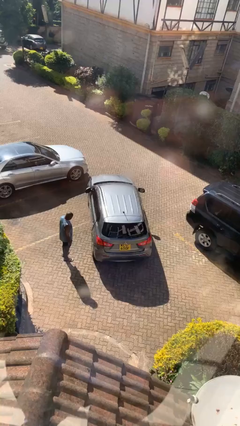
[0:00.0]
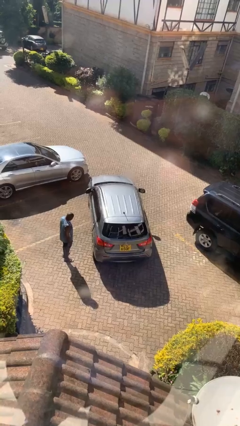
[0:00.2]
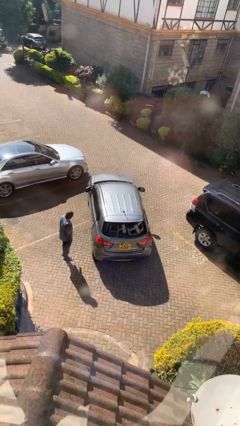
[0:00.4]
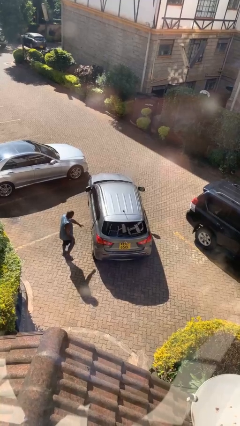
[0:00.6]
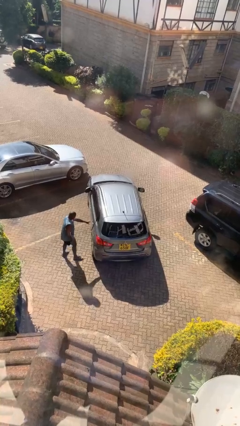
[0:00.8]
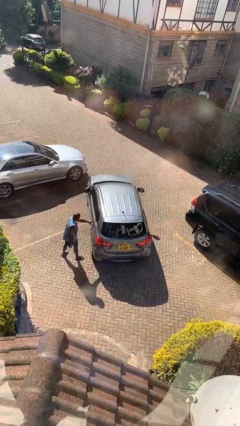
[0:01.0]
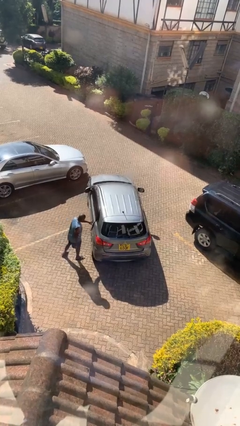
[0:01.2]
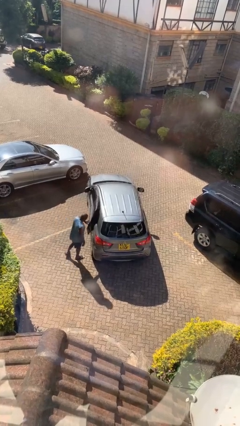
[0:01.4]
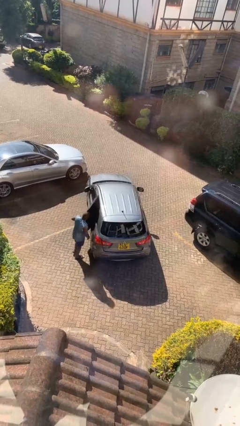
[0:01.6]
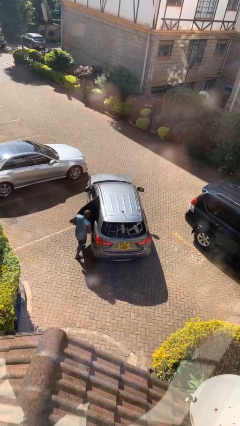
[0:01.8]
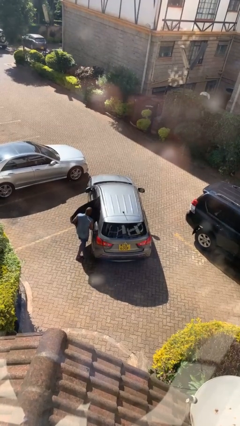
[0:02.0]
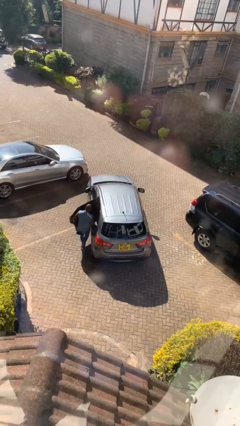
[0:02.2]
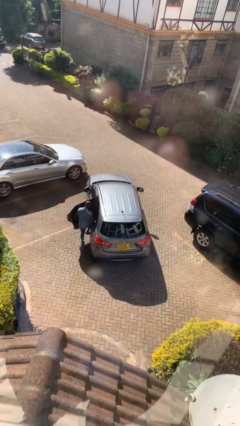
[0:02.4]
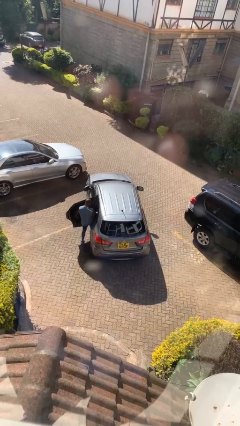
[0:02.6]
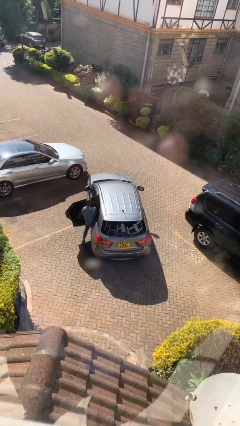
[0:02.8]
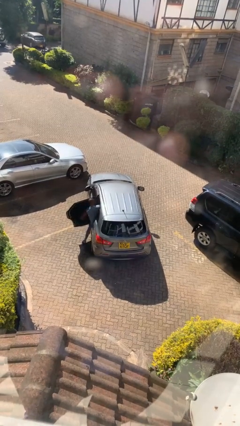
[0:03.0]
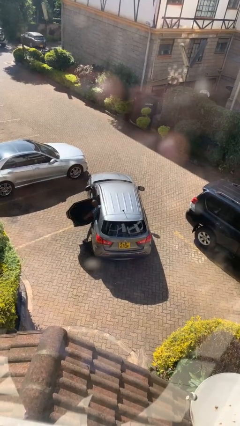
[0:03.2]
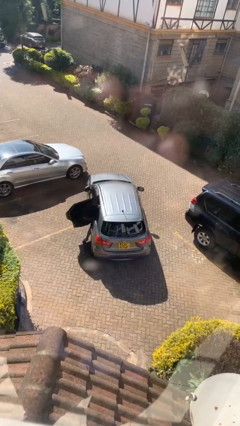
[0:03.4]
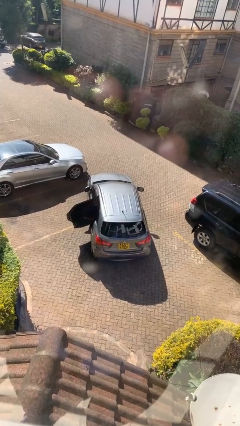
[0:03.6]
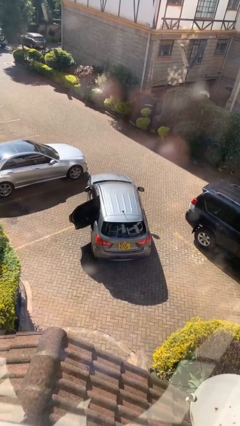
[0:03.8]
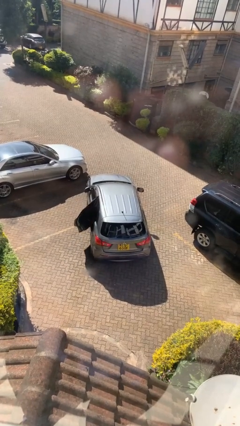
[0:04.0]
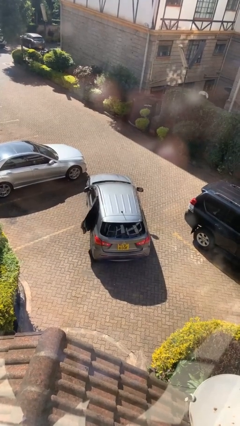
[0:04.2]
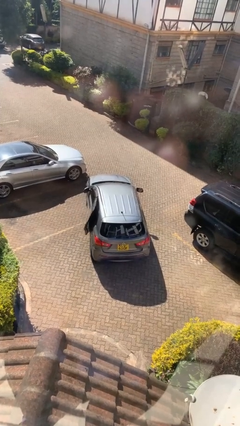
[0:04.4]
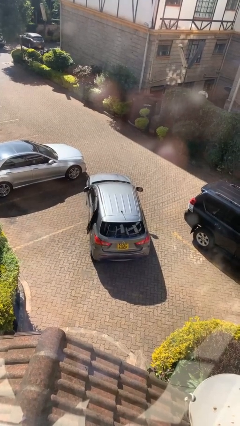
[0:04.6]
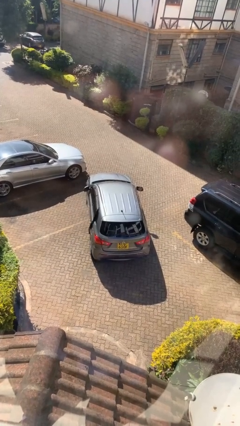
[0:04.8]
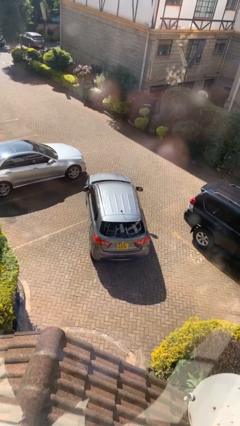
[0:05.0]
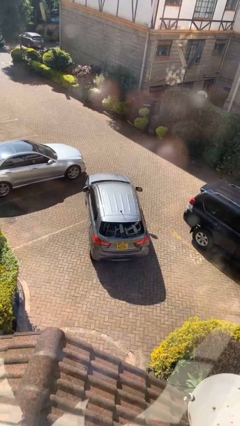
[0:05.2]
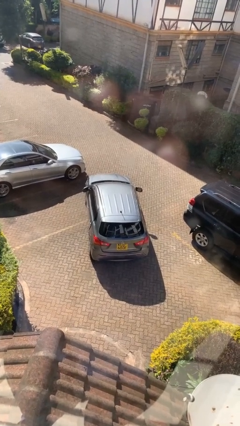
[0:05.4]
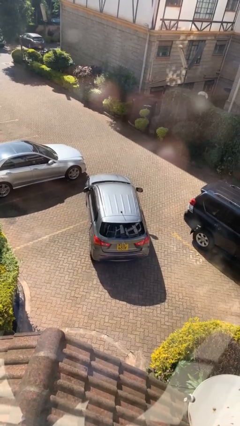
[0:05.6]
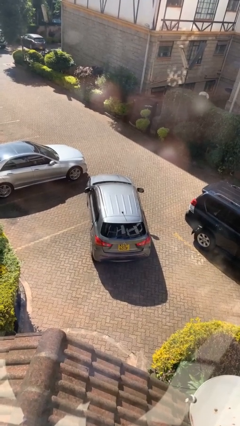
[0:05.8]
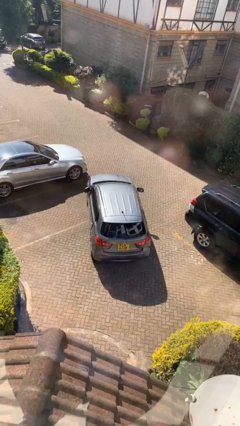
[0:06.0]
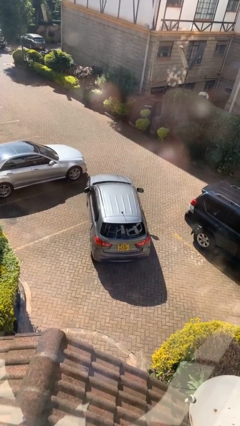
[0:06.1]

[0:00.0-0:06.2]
car picks up person

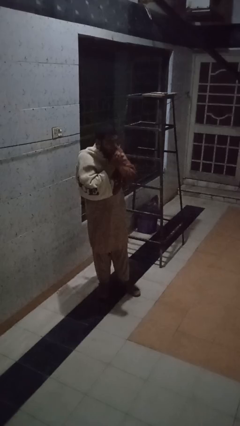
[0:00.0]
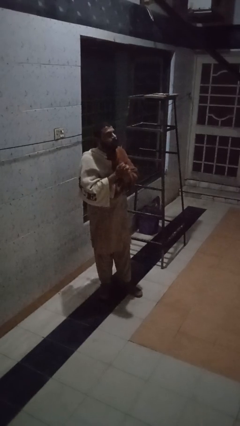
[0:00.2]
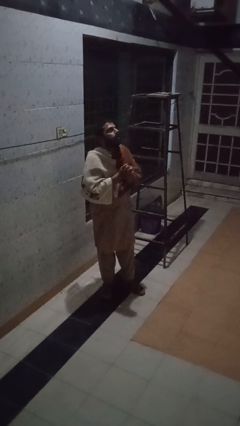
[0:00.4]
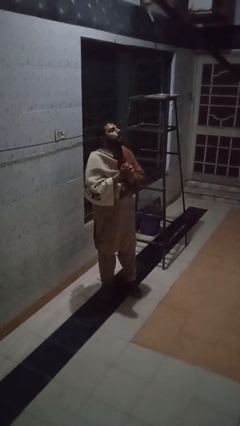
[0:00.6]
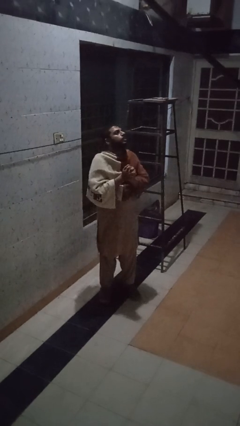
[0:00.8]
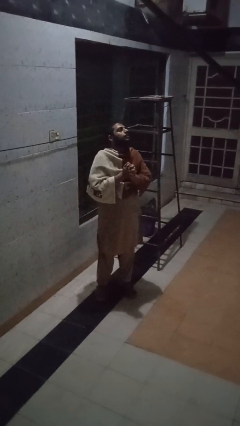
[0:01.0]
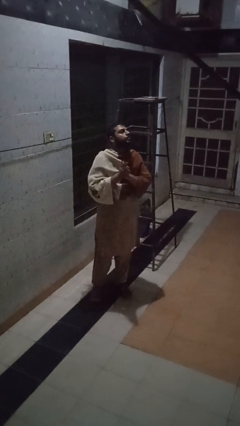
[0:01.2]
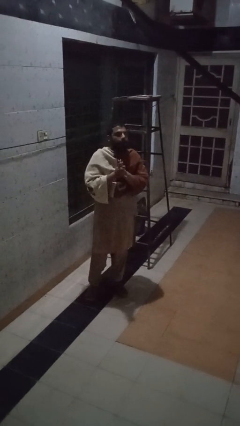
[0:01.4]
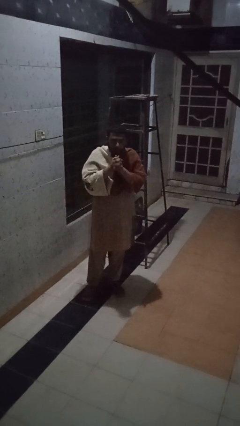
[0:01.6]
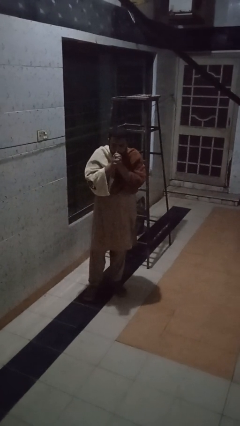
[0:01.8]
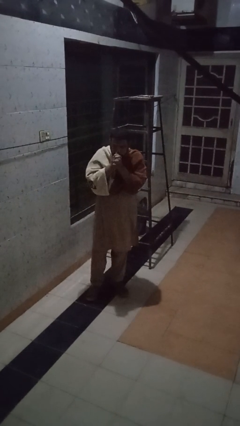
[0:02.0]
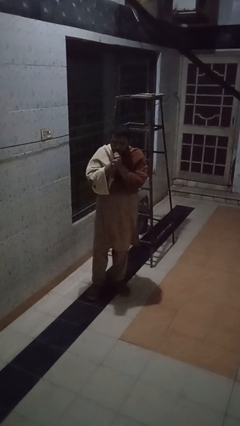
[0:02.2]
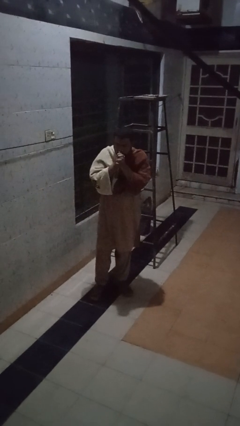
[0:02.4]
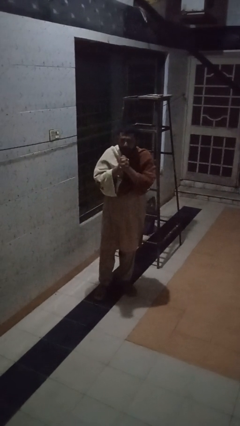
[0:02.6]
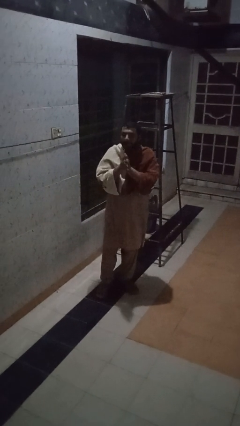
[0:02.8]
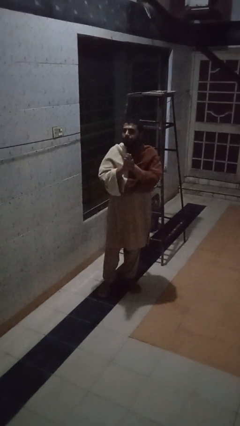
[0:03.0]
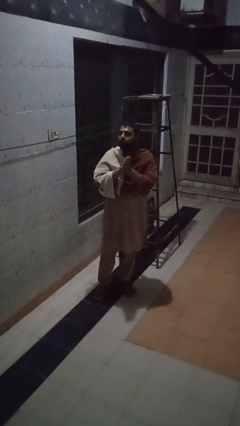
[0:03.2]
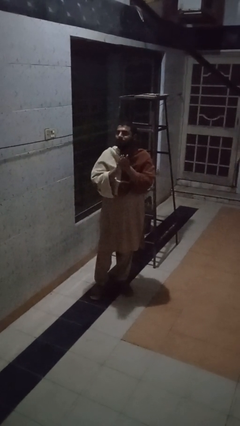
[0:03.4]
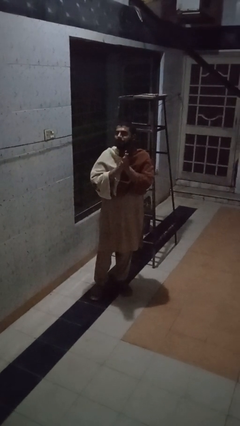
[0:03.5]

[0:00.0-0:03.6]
person blows into hands

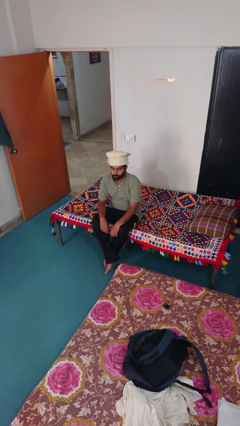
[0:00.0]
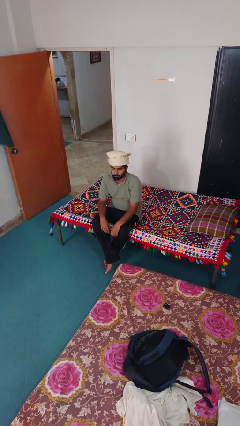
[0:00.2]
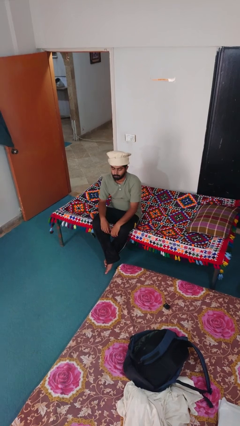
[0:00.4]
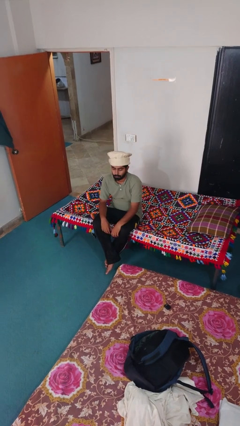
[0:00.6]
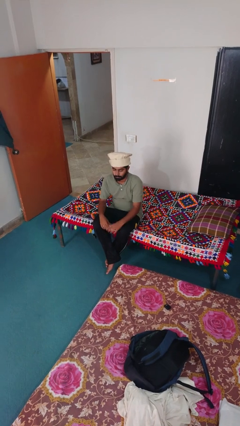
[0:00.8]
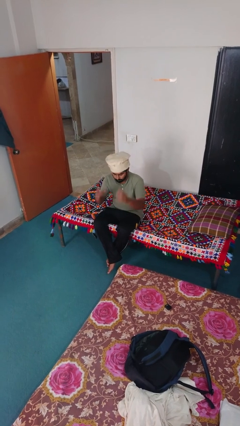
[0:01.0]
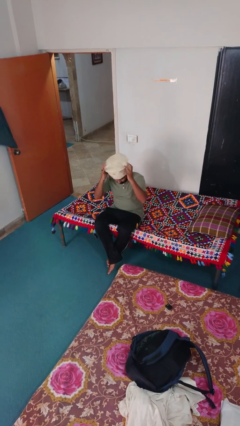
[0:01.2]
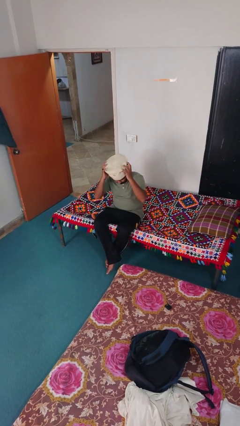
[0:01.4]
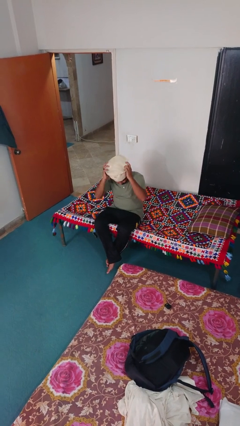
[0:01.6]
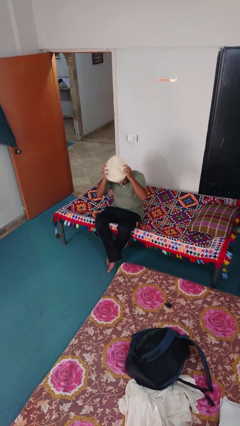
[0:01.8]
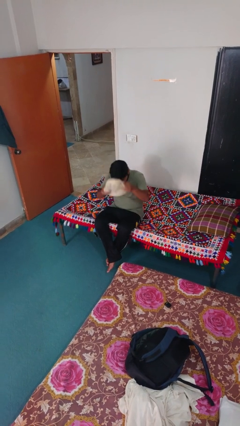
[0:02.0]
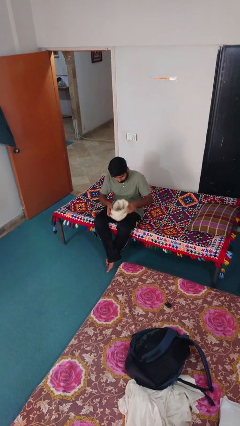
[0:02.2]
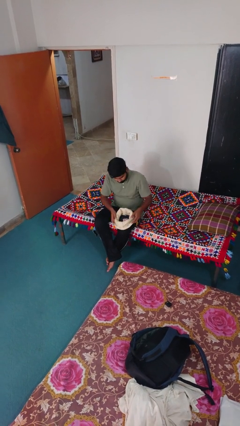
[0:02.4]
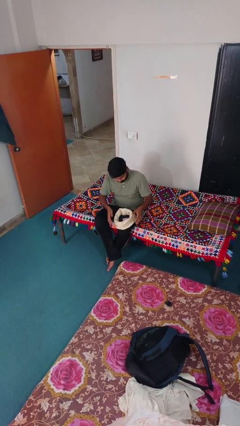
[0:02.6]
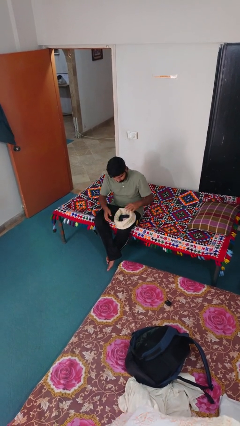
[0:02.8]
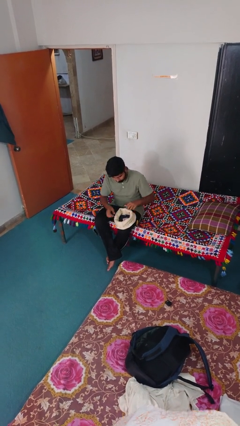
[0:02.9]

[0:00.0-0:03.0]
person takes off hat

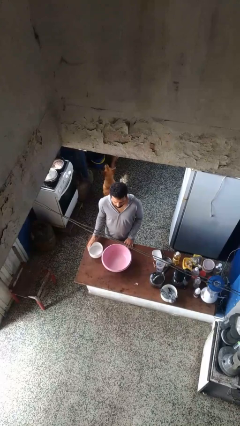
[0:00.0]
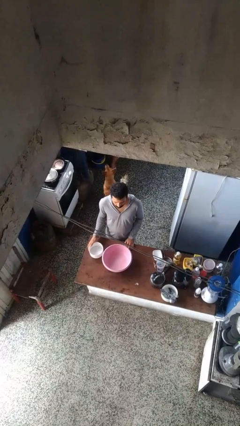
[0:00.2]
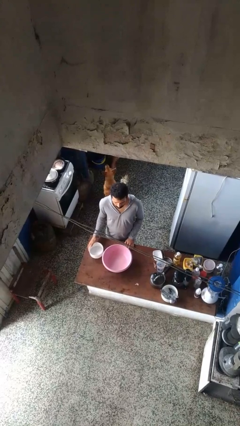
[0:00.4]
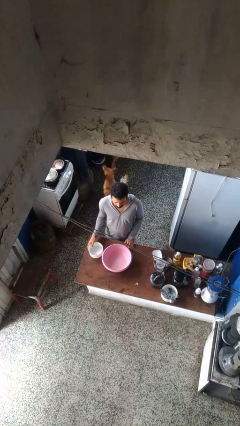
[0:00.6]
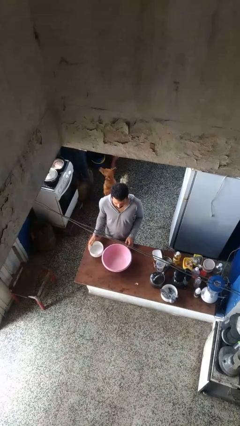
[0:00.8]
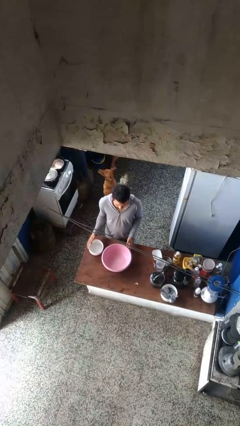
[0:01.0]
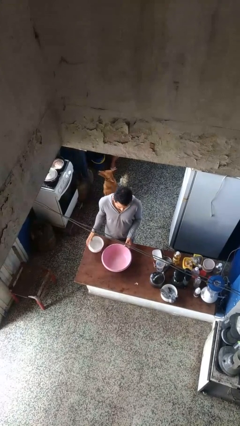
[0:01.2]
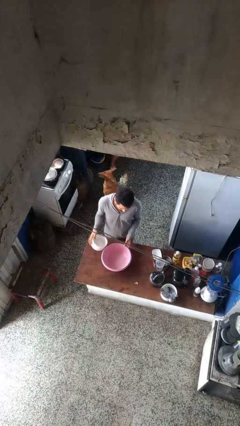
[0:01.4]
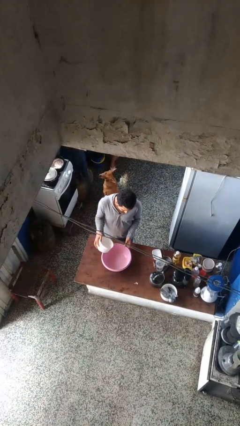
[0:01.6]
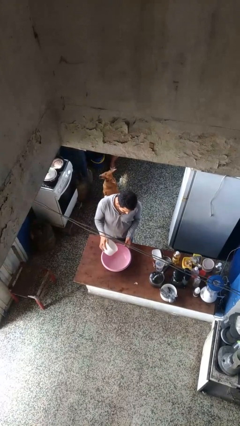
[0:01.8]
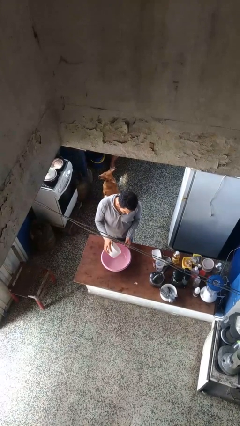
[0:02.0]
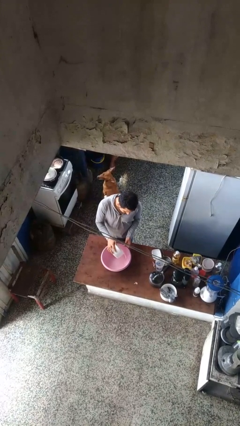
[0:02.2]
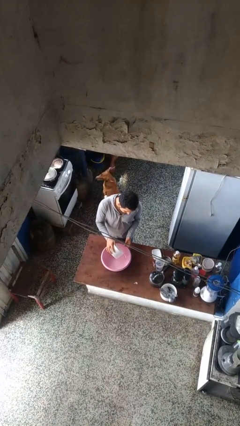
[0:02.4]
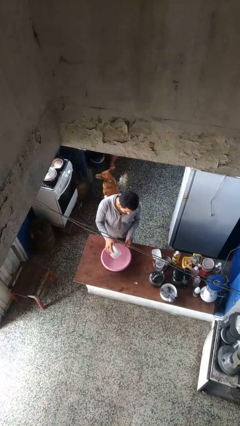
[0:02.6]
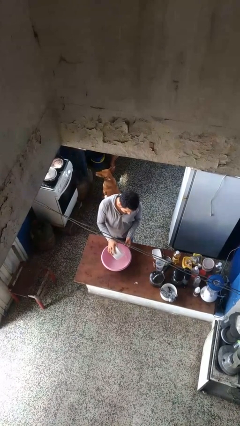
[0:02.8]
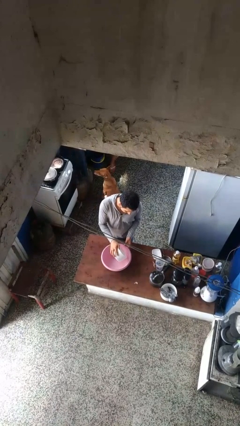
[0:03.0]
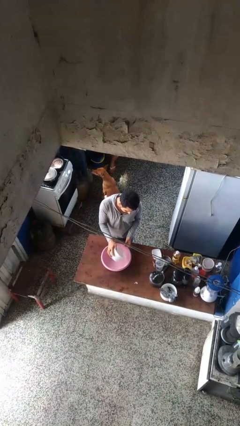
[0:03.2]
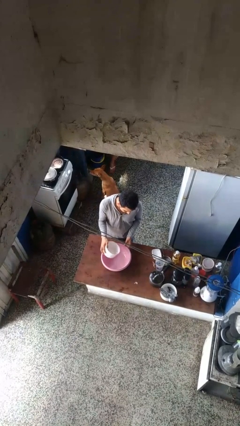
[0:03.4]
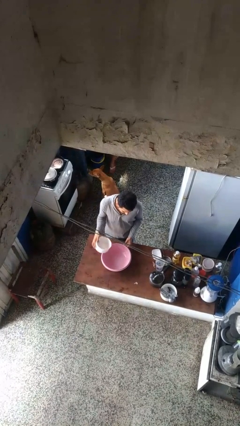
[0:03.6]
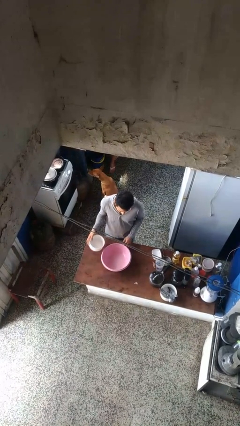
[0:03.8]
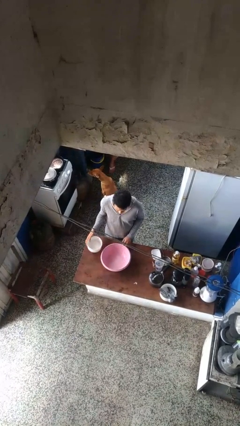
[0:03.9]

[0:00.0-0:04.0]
person pours into bowl

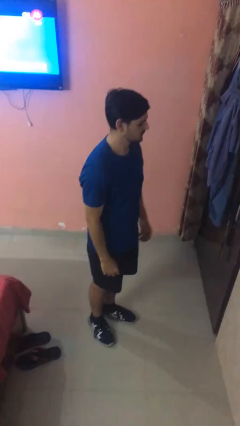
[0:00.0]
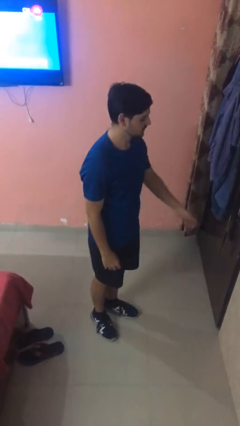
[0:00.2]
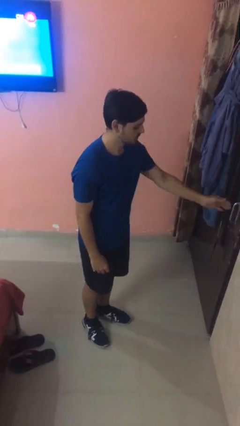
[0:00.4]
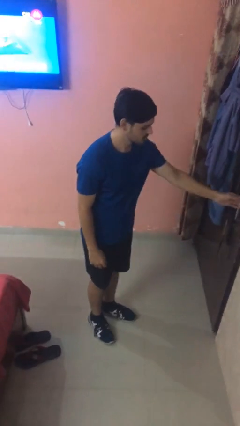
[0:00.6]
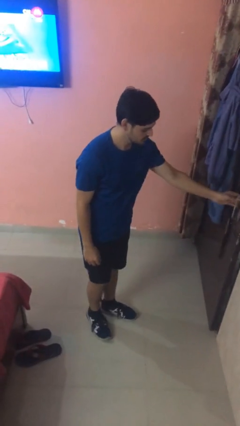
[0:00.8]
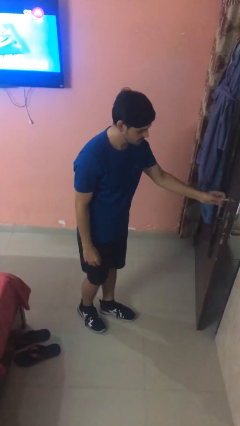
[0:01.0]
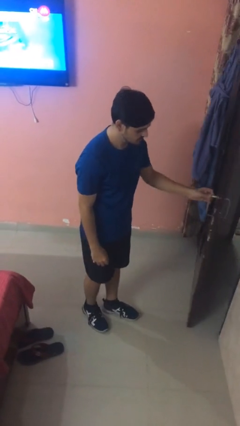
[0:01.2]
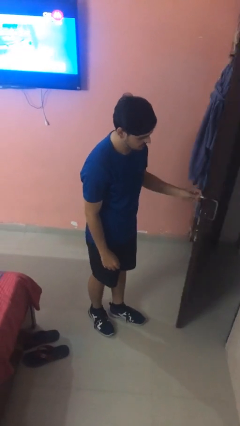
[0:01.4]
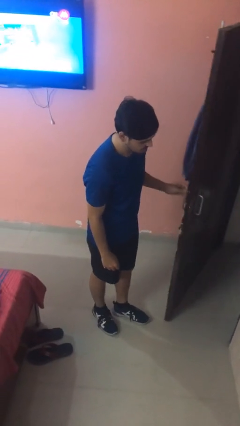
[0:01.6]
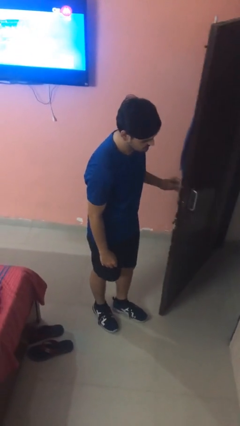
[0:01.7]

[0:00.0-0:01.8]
person opens facility door
